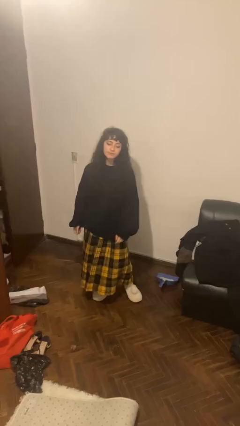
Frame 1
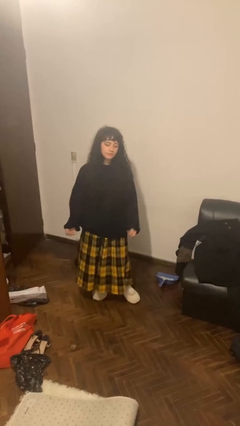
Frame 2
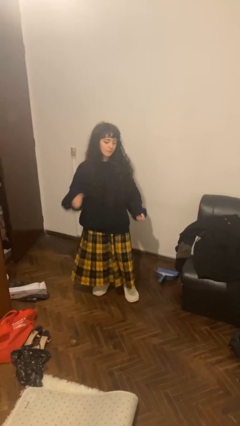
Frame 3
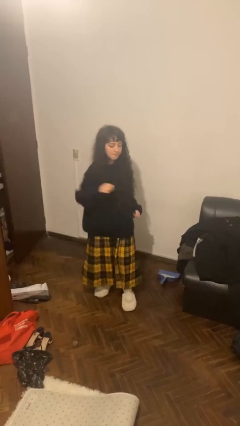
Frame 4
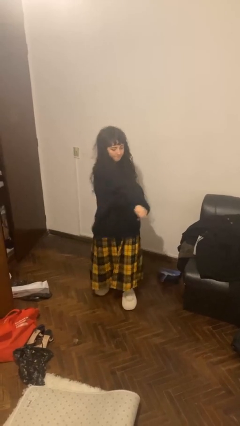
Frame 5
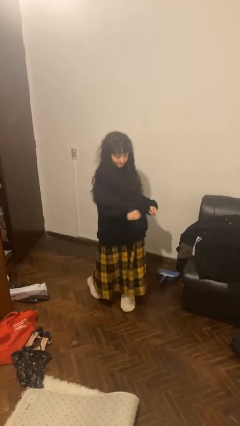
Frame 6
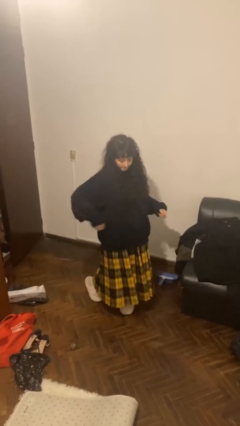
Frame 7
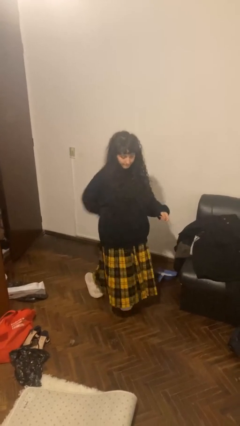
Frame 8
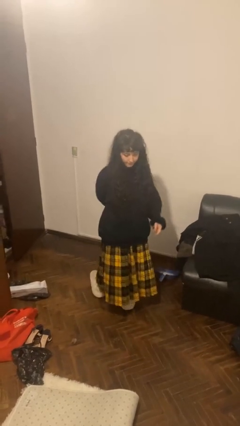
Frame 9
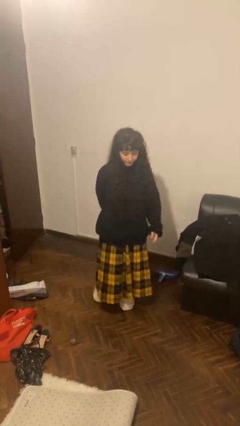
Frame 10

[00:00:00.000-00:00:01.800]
person punches

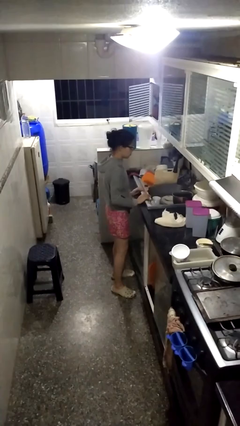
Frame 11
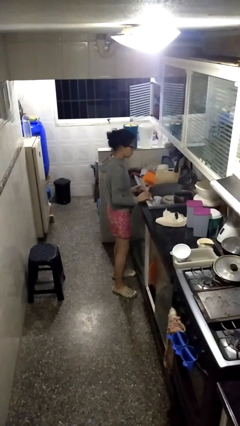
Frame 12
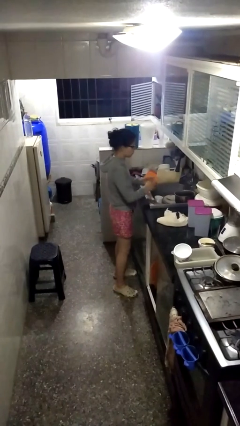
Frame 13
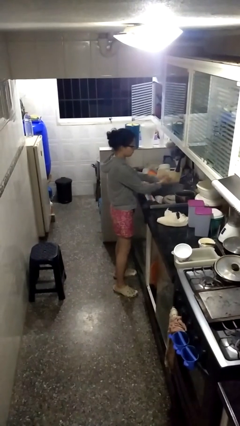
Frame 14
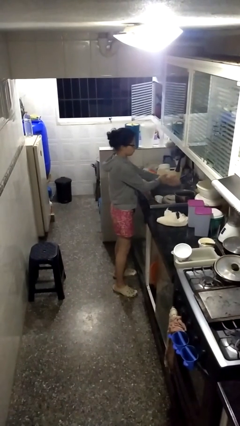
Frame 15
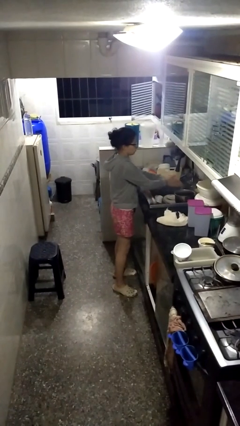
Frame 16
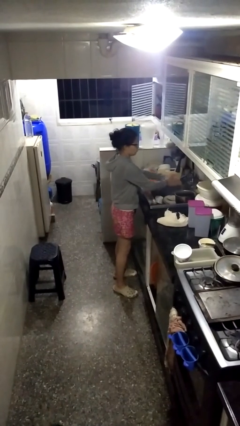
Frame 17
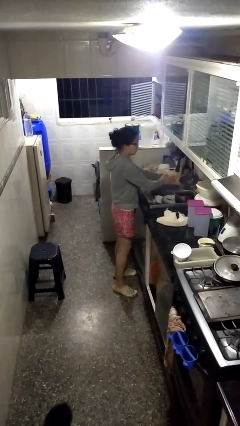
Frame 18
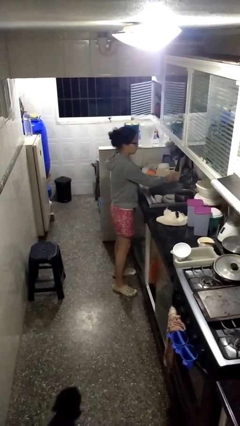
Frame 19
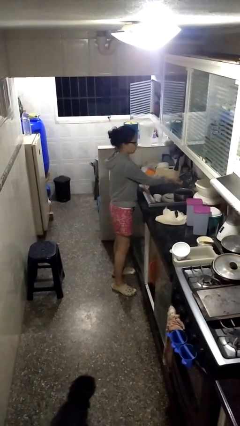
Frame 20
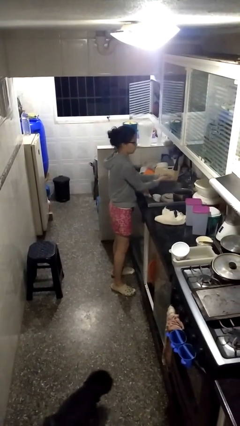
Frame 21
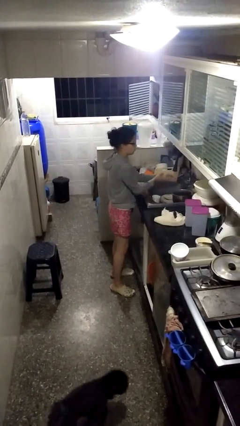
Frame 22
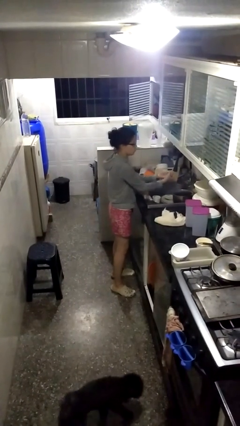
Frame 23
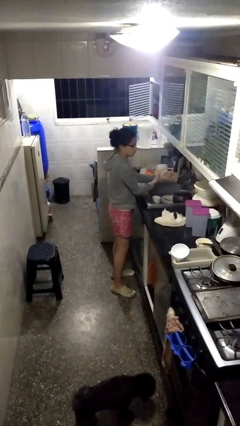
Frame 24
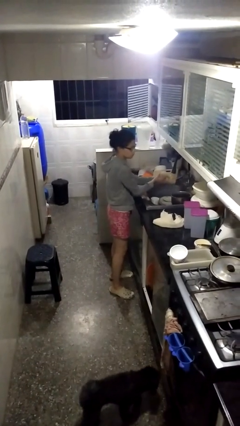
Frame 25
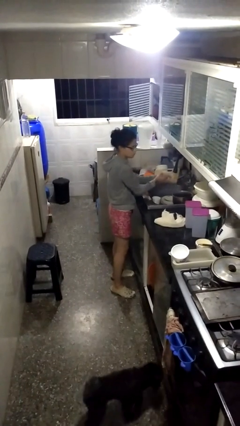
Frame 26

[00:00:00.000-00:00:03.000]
person washes hands

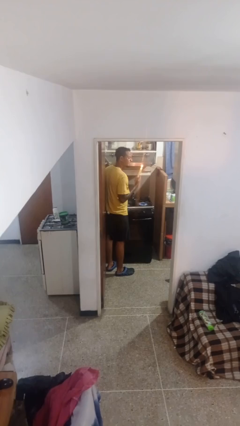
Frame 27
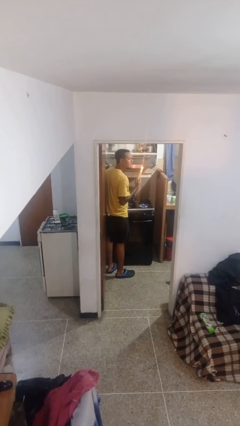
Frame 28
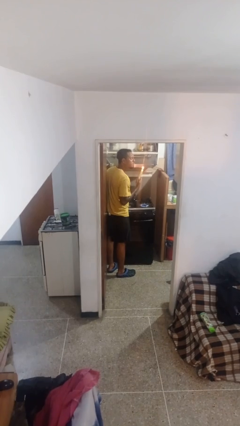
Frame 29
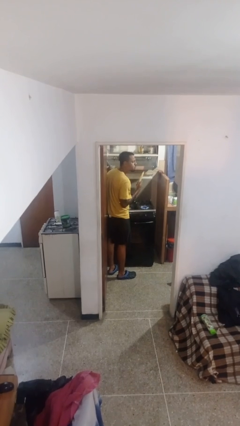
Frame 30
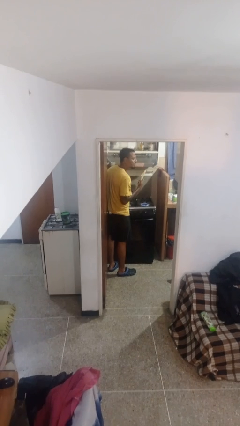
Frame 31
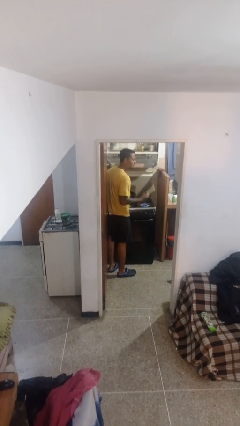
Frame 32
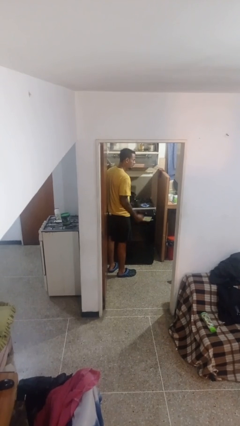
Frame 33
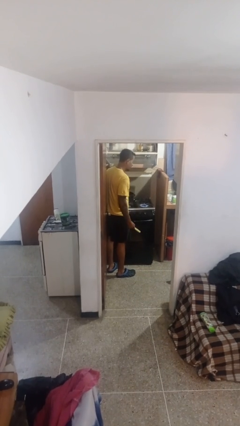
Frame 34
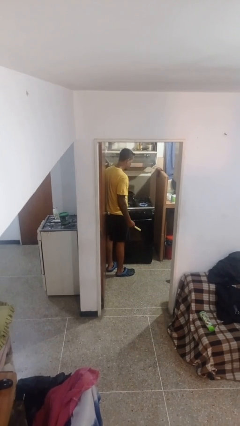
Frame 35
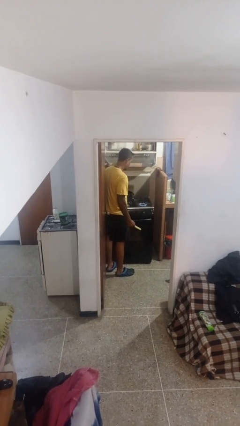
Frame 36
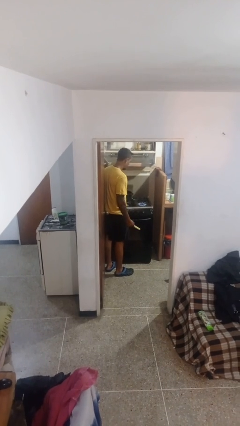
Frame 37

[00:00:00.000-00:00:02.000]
person extinguishes candle

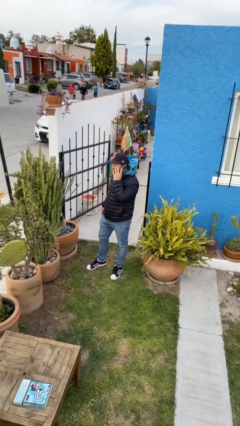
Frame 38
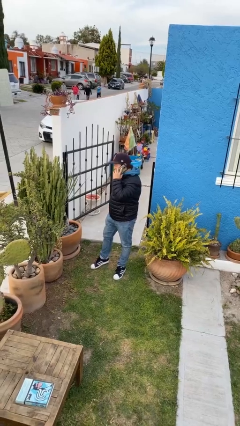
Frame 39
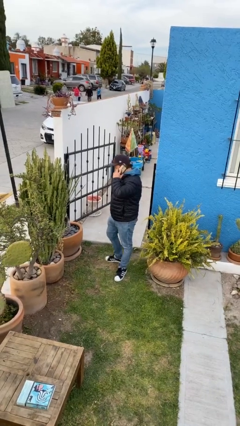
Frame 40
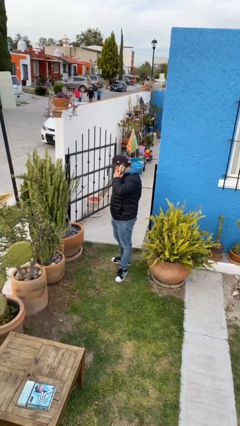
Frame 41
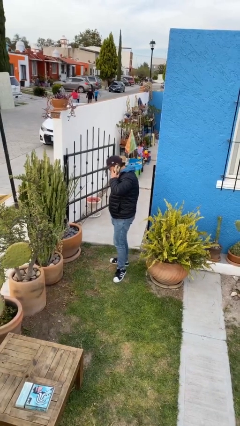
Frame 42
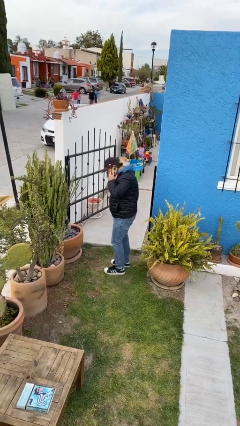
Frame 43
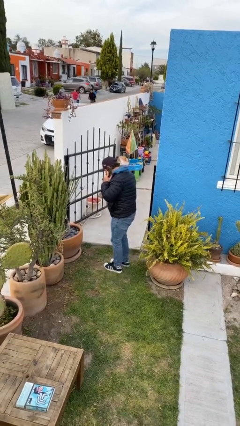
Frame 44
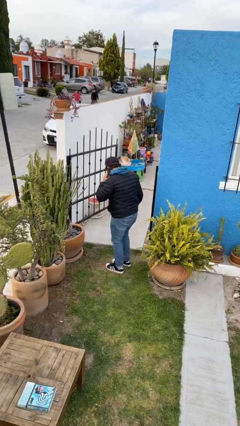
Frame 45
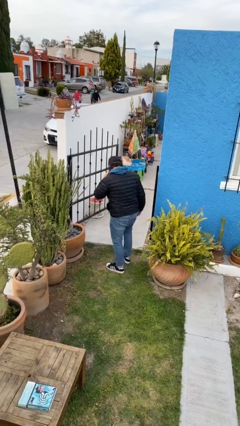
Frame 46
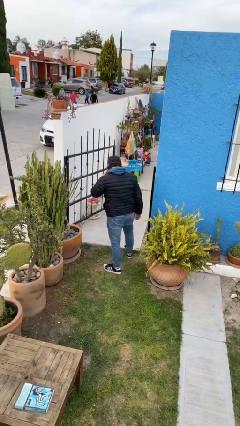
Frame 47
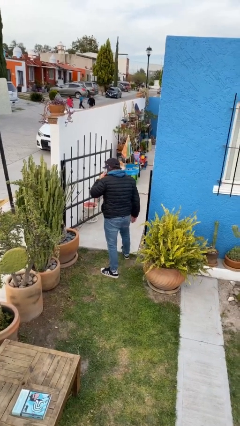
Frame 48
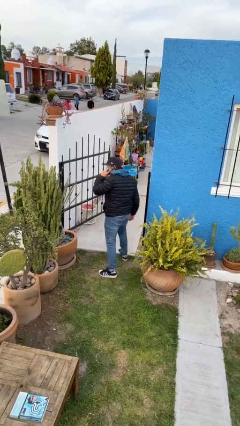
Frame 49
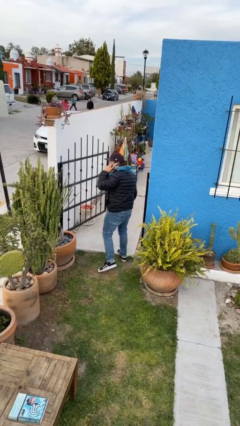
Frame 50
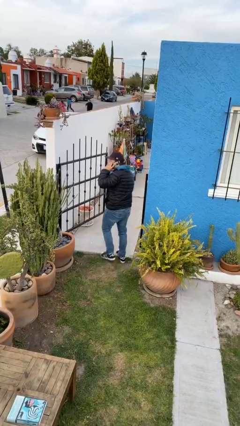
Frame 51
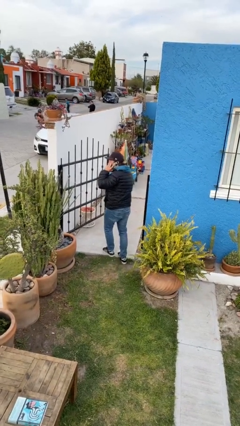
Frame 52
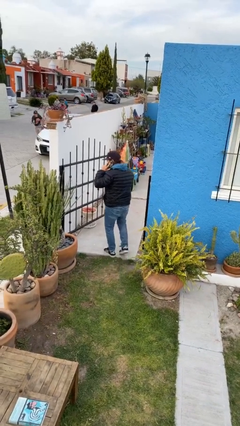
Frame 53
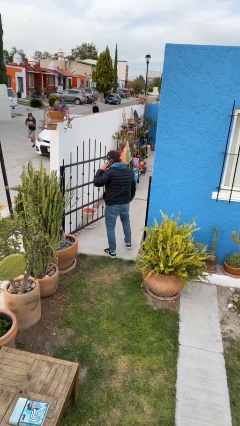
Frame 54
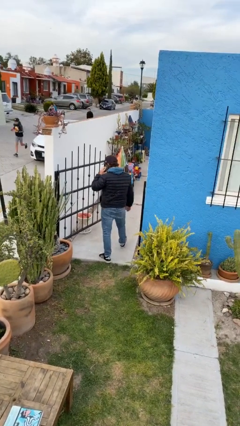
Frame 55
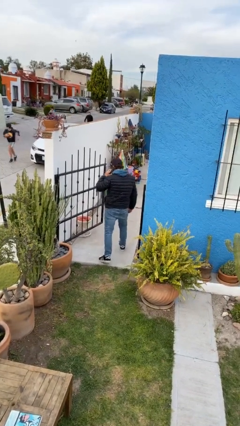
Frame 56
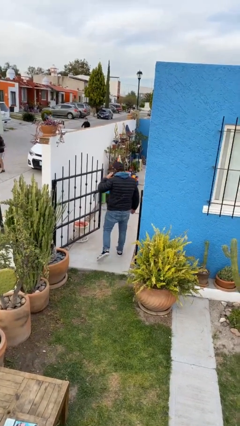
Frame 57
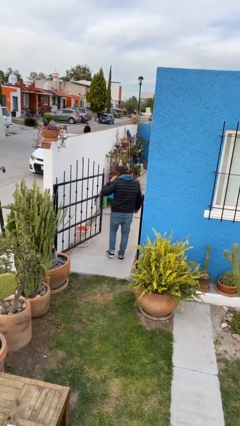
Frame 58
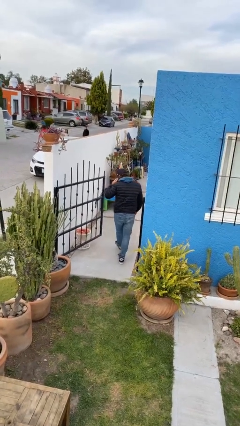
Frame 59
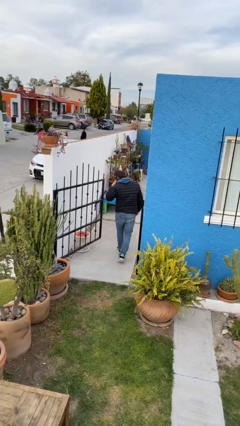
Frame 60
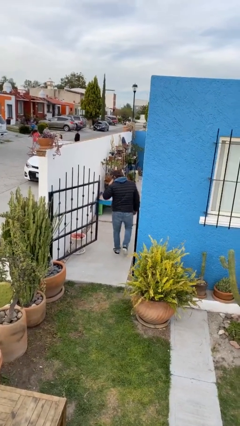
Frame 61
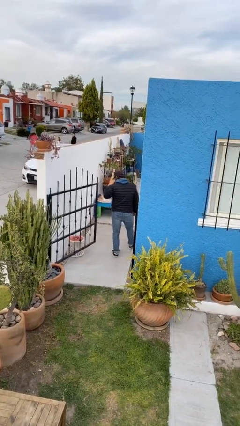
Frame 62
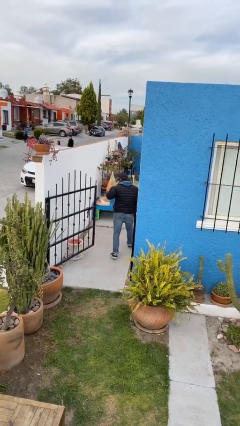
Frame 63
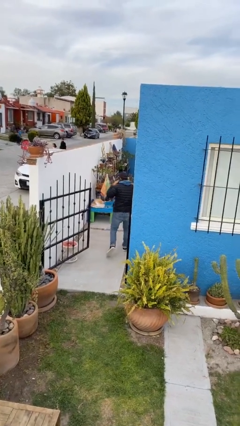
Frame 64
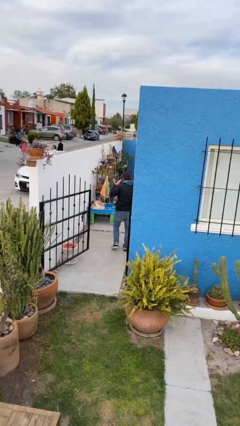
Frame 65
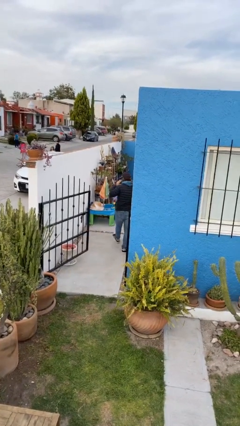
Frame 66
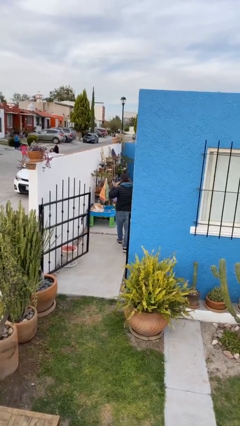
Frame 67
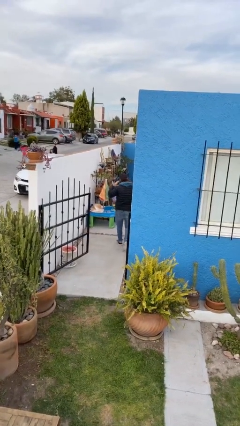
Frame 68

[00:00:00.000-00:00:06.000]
person exits scene through structure

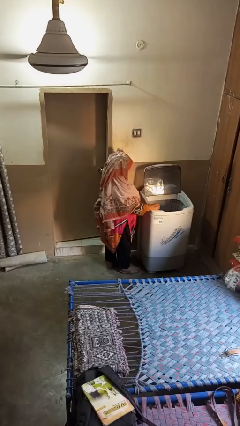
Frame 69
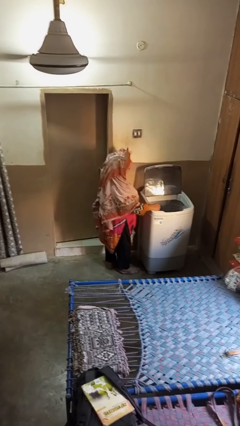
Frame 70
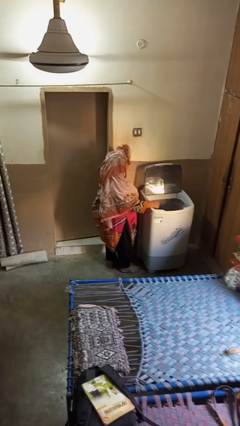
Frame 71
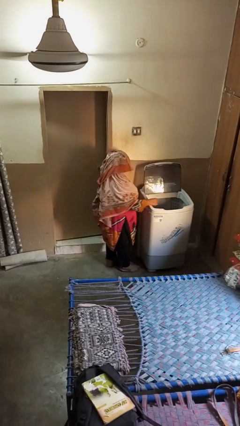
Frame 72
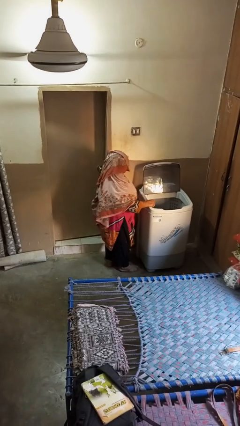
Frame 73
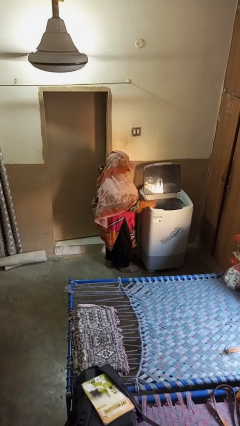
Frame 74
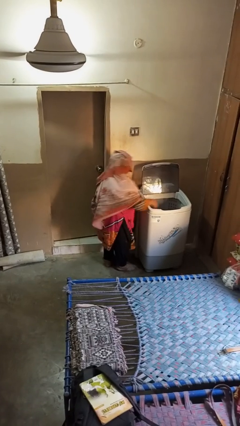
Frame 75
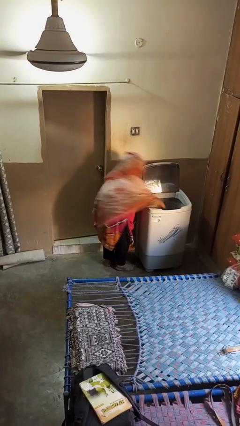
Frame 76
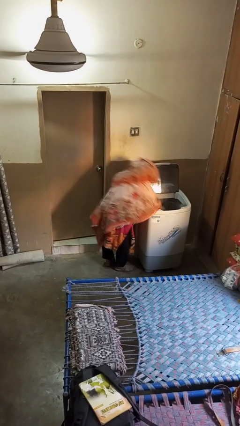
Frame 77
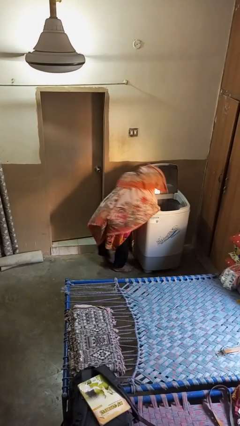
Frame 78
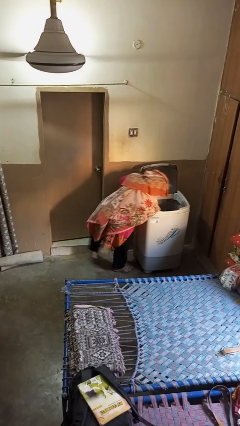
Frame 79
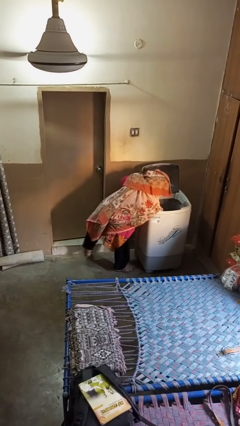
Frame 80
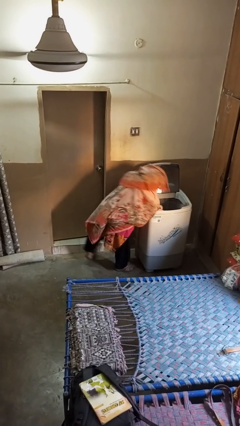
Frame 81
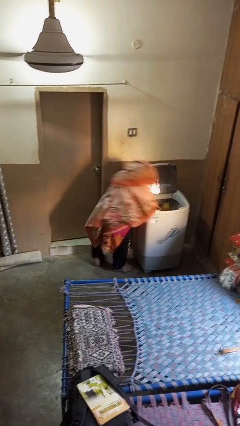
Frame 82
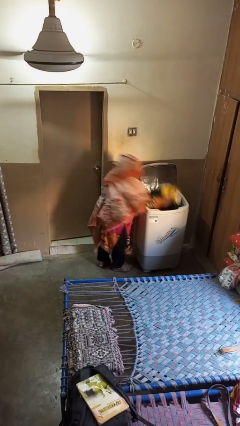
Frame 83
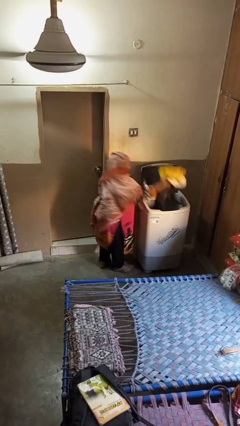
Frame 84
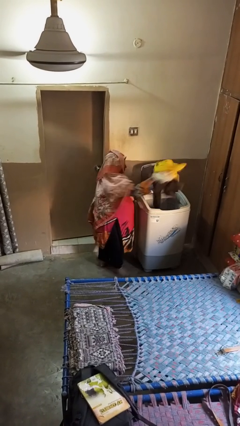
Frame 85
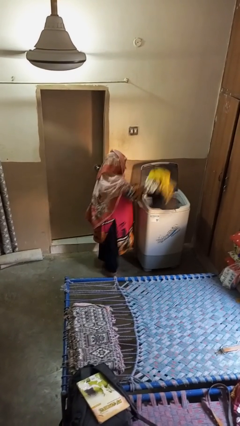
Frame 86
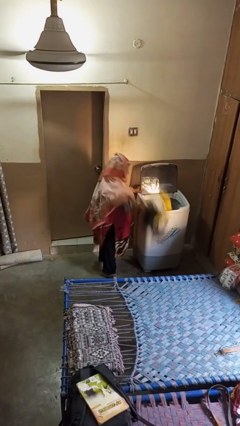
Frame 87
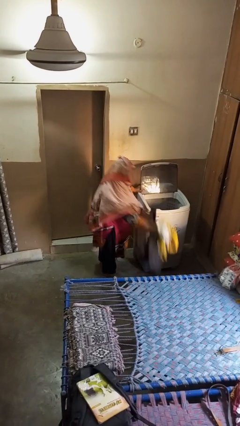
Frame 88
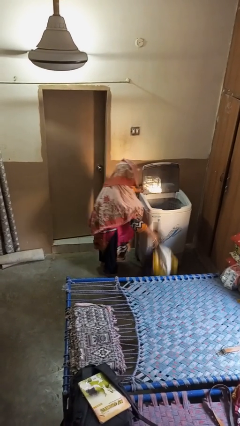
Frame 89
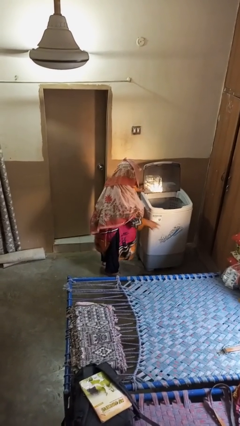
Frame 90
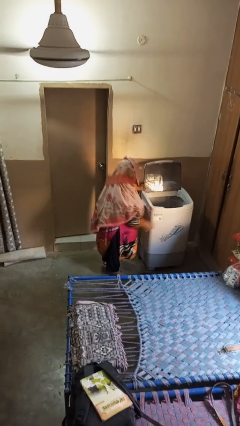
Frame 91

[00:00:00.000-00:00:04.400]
person unloads clotheswasher

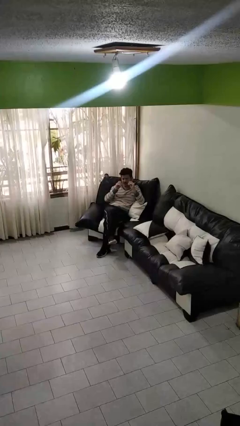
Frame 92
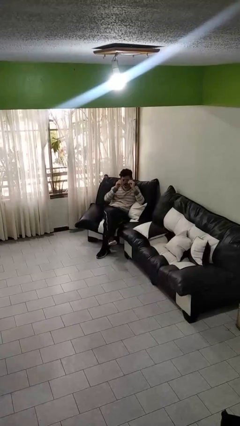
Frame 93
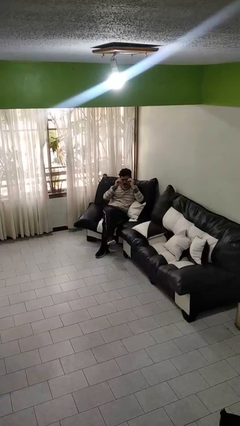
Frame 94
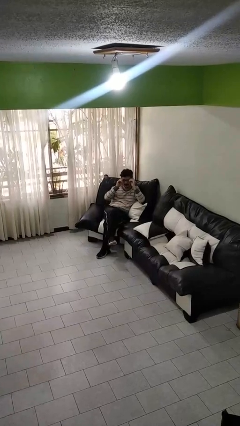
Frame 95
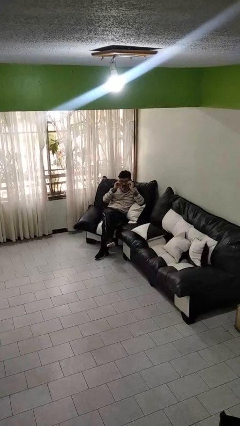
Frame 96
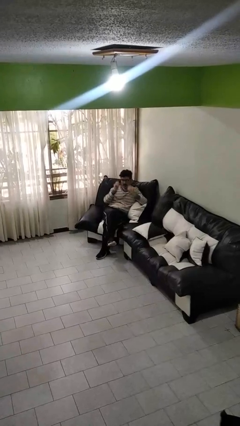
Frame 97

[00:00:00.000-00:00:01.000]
person puts on glasses
